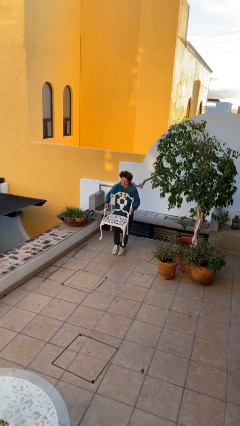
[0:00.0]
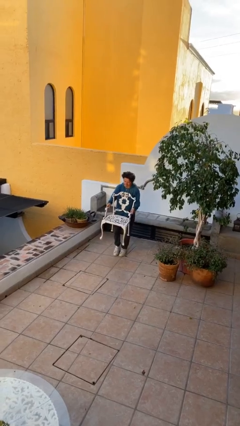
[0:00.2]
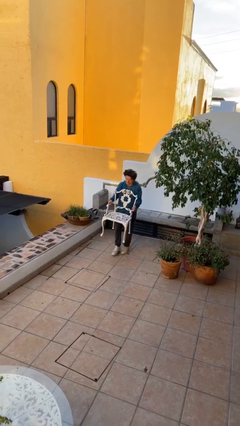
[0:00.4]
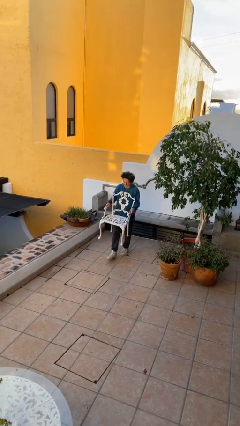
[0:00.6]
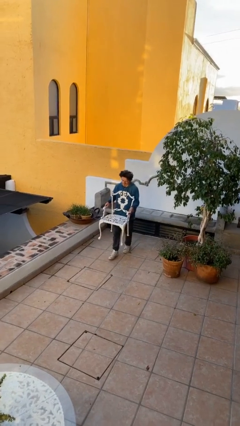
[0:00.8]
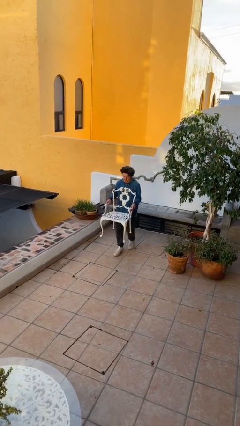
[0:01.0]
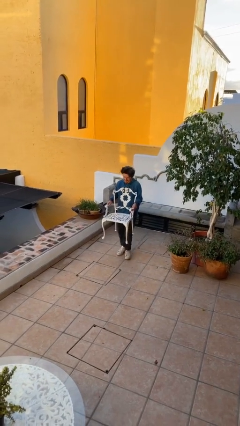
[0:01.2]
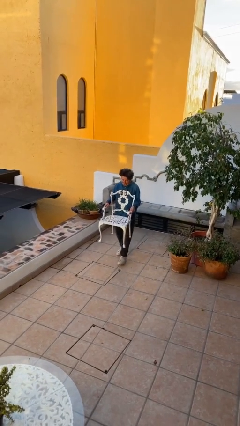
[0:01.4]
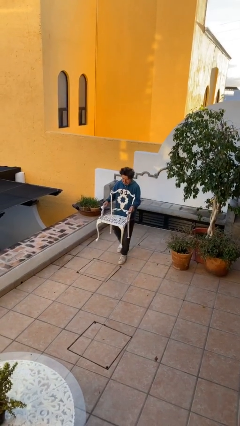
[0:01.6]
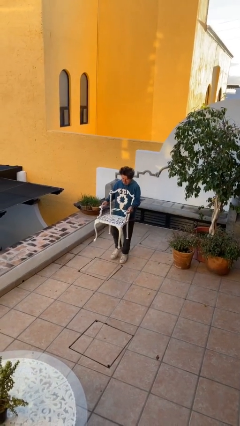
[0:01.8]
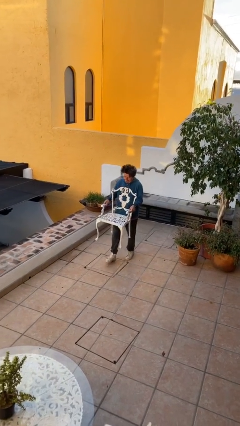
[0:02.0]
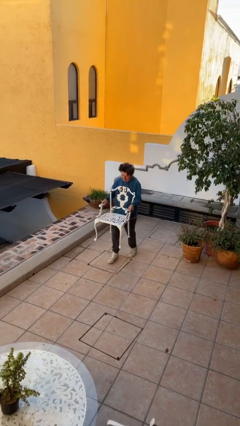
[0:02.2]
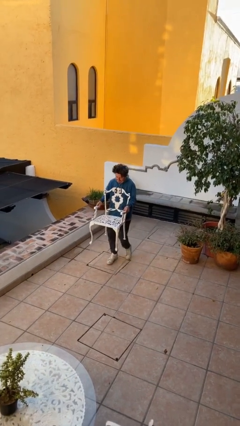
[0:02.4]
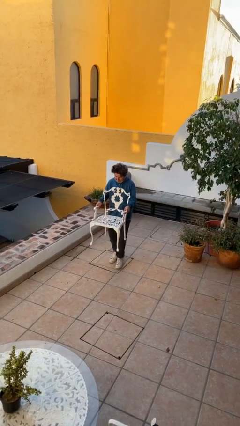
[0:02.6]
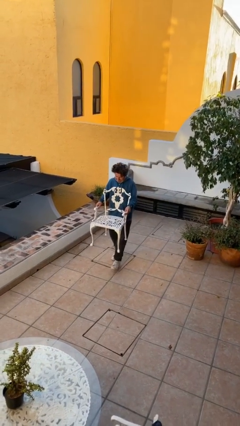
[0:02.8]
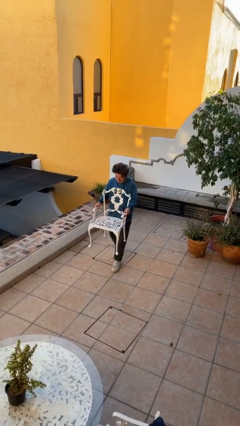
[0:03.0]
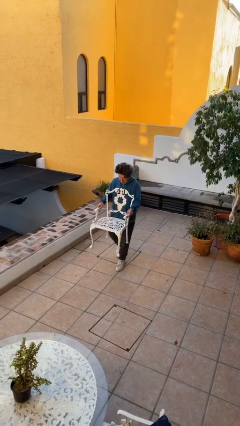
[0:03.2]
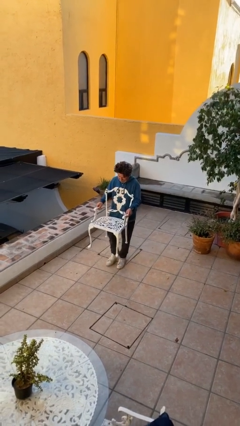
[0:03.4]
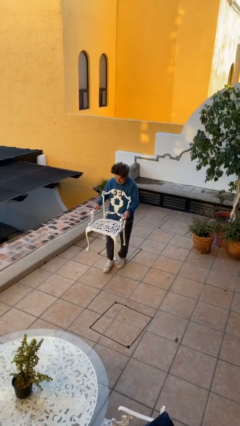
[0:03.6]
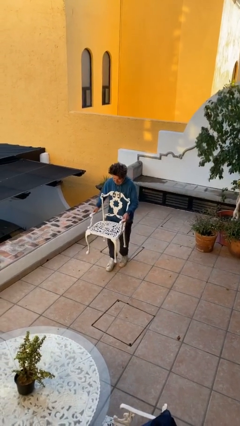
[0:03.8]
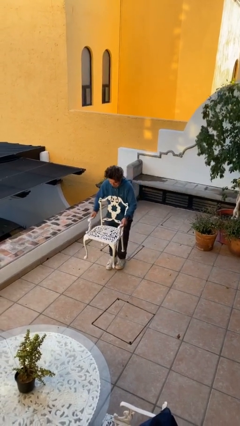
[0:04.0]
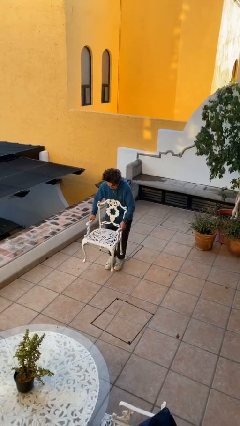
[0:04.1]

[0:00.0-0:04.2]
person carries heavy object

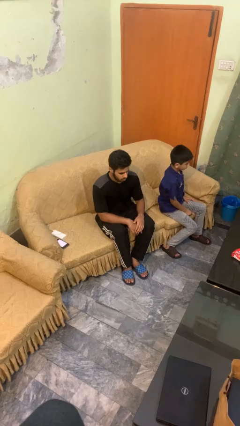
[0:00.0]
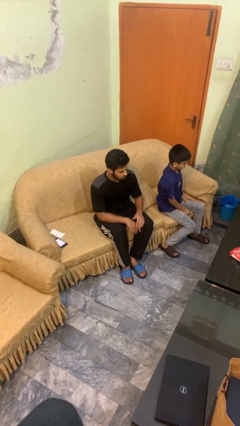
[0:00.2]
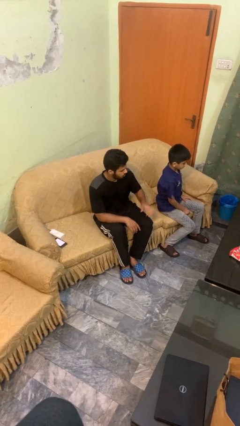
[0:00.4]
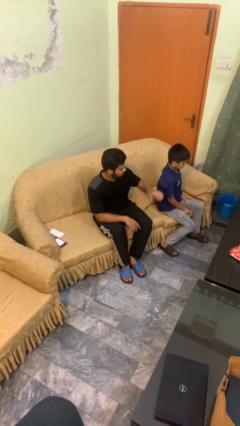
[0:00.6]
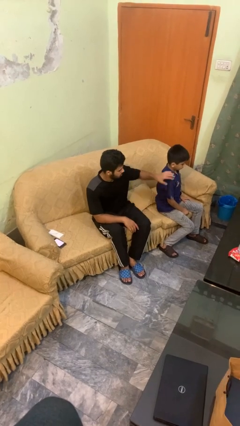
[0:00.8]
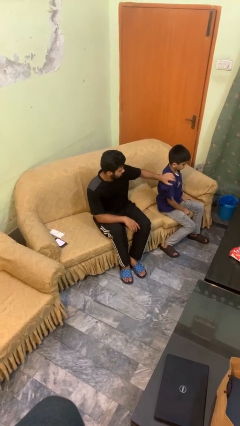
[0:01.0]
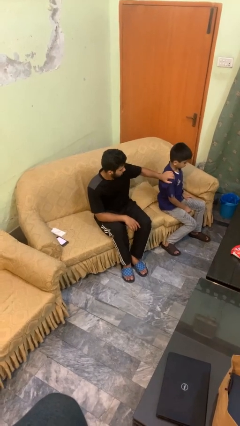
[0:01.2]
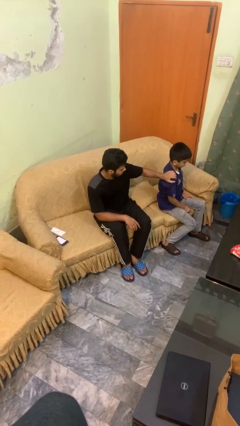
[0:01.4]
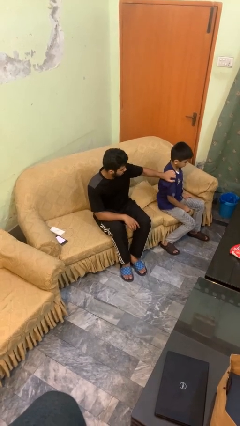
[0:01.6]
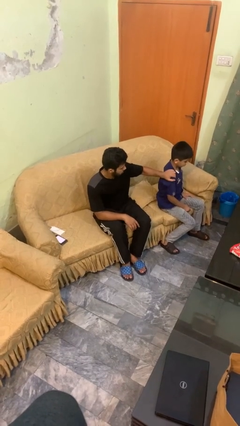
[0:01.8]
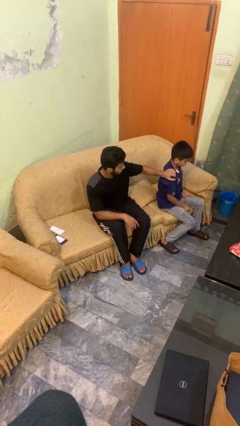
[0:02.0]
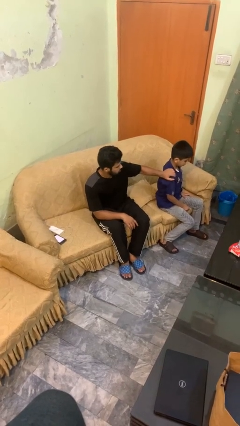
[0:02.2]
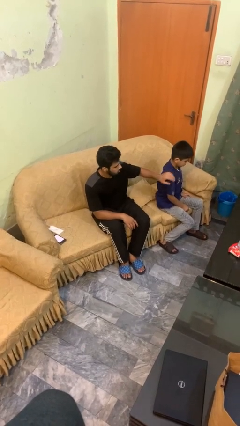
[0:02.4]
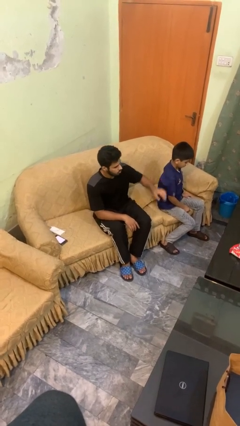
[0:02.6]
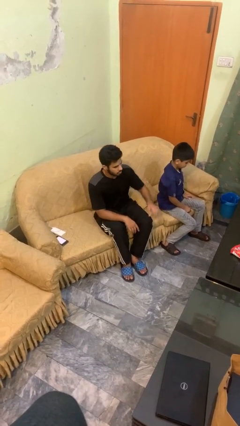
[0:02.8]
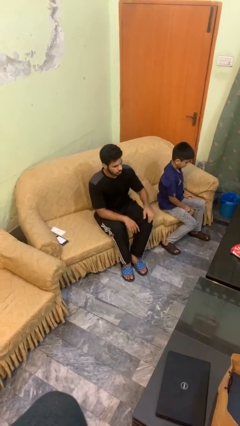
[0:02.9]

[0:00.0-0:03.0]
person pounds shoulders of person

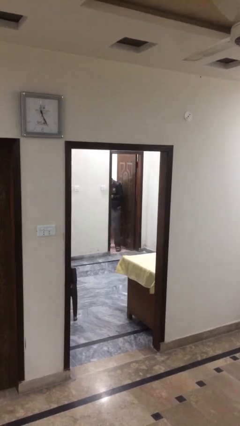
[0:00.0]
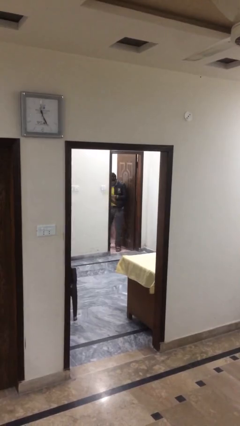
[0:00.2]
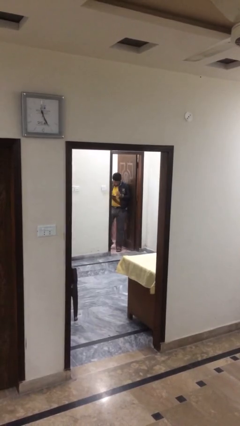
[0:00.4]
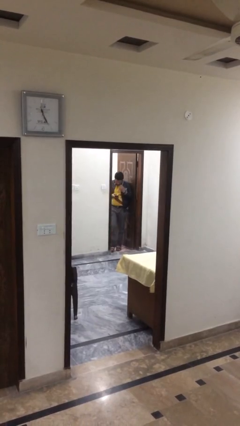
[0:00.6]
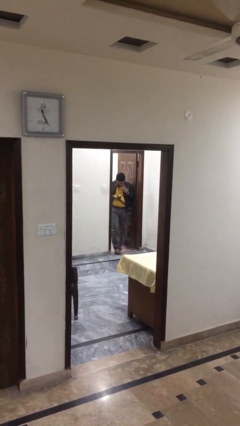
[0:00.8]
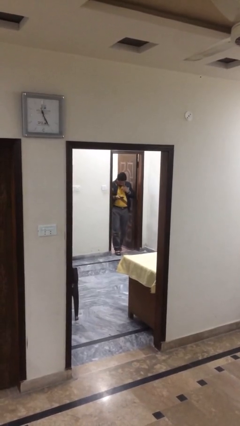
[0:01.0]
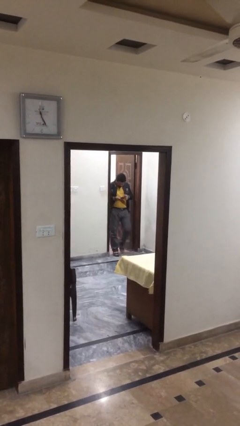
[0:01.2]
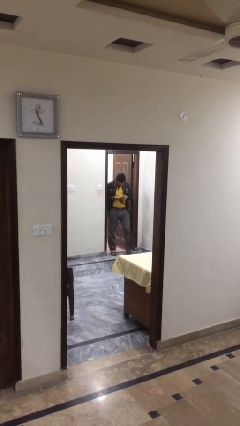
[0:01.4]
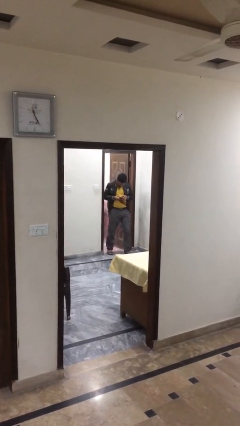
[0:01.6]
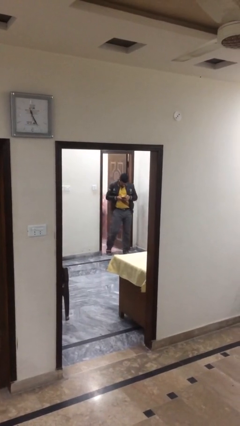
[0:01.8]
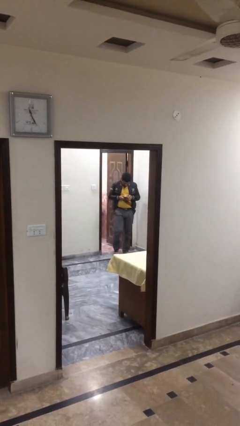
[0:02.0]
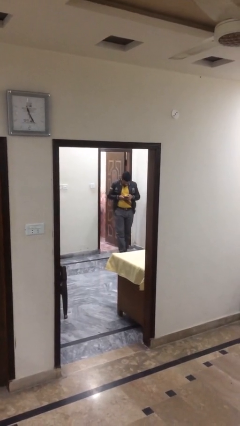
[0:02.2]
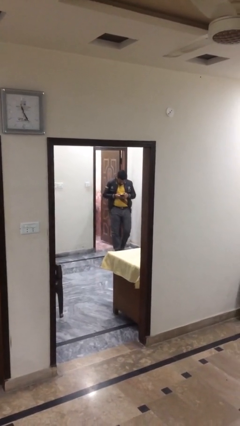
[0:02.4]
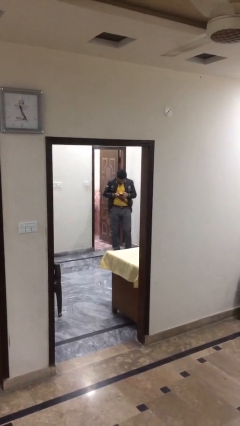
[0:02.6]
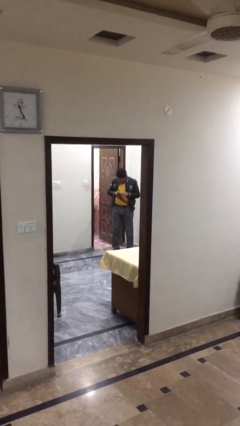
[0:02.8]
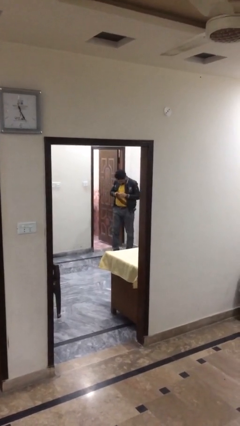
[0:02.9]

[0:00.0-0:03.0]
person exits scene through structure

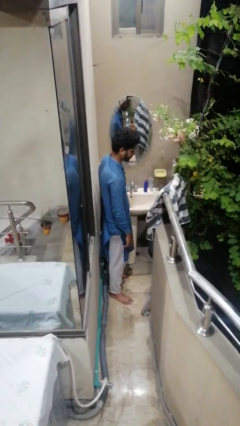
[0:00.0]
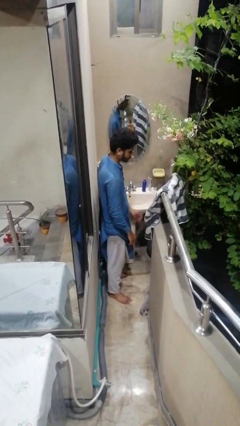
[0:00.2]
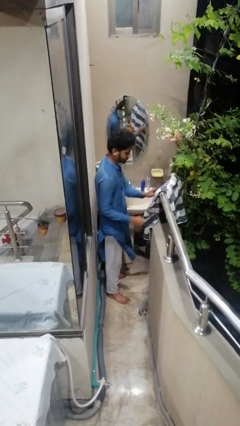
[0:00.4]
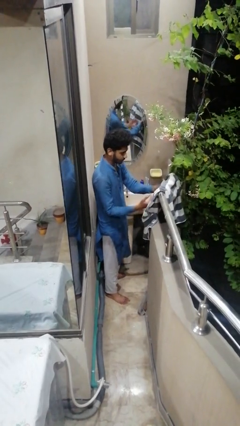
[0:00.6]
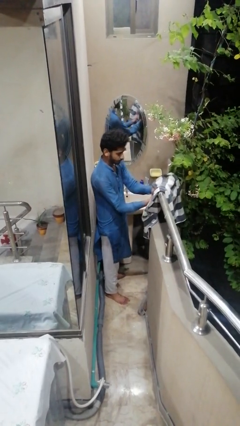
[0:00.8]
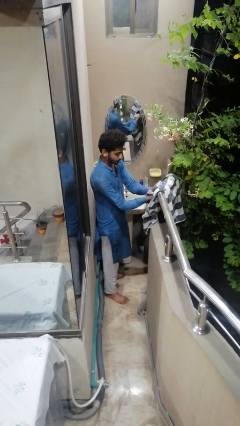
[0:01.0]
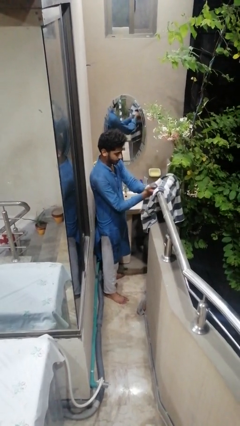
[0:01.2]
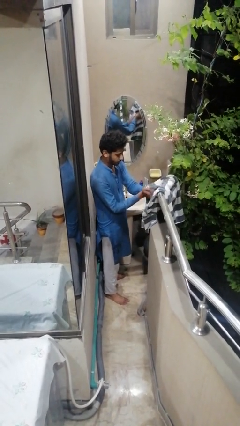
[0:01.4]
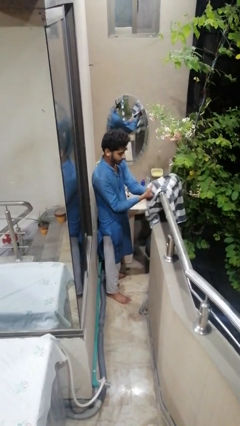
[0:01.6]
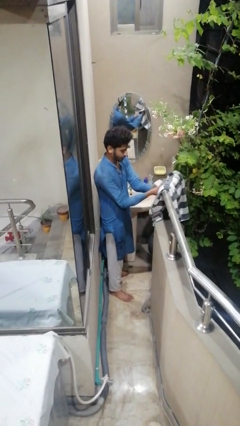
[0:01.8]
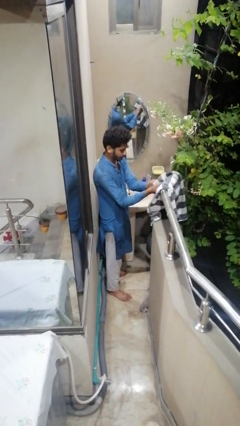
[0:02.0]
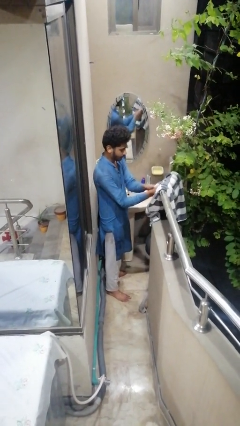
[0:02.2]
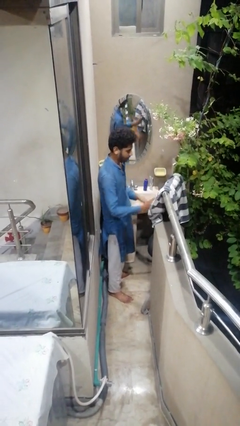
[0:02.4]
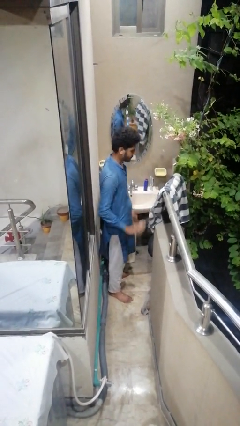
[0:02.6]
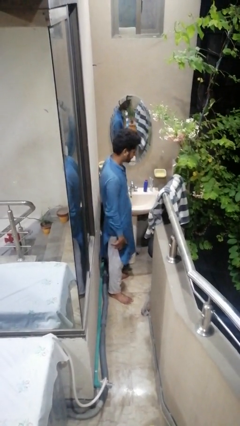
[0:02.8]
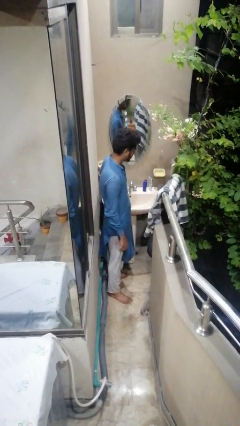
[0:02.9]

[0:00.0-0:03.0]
person dries hands with towel

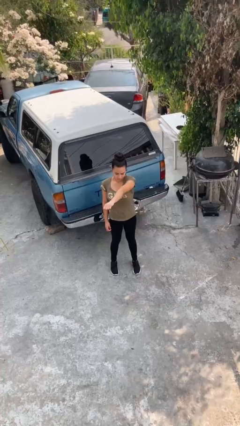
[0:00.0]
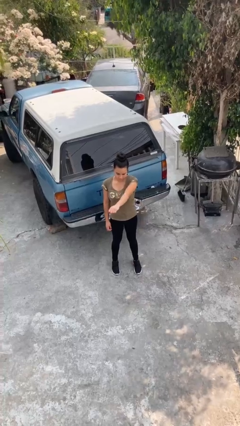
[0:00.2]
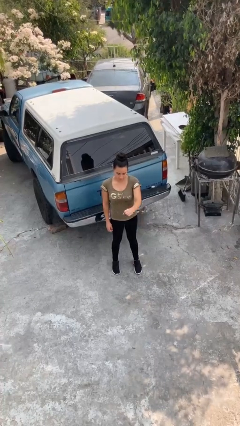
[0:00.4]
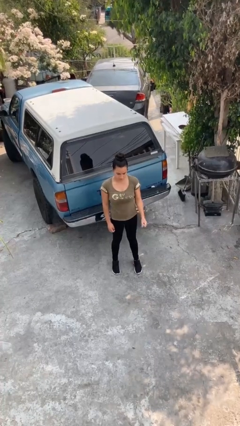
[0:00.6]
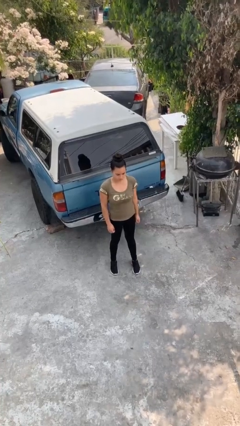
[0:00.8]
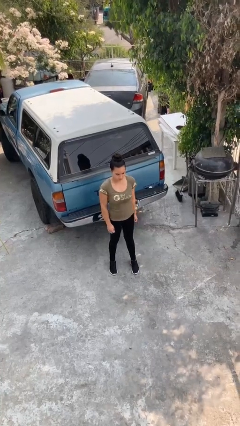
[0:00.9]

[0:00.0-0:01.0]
person karate chop

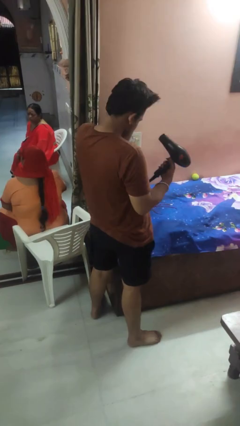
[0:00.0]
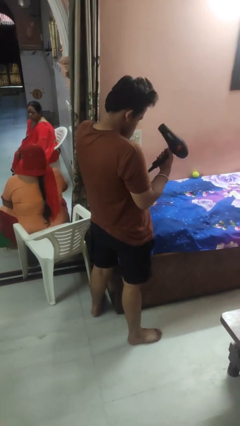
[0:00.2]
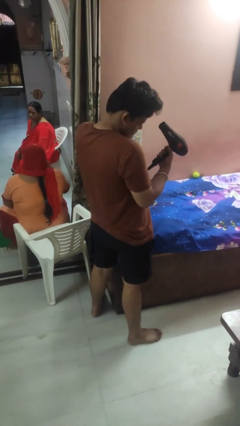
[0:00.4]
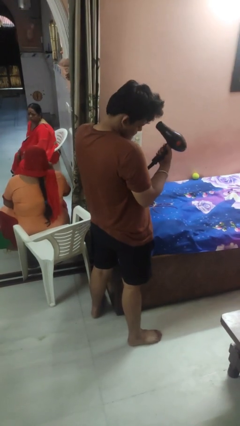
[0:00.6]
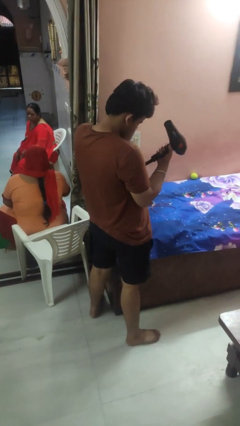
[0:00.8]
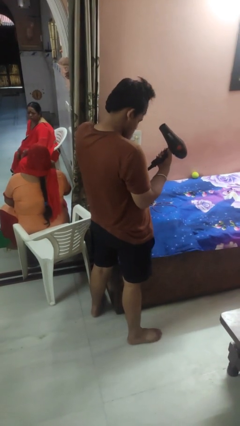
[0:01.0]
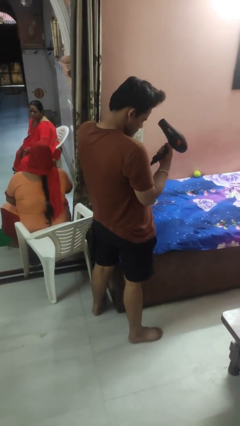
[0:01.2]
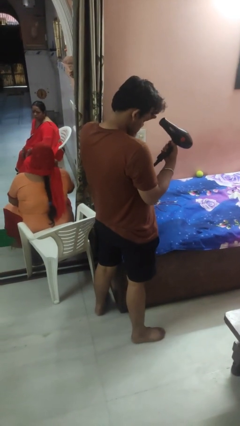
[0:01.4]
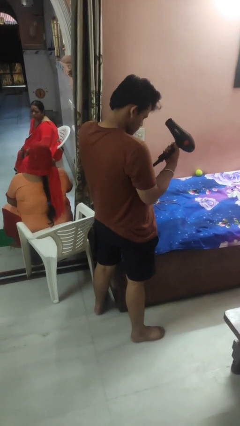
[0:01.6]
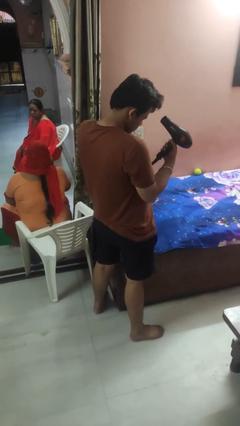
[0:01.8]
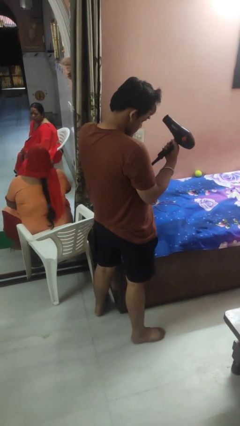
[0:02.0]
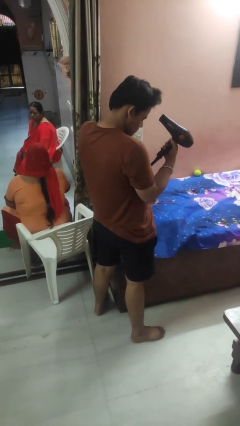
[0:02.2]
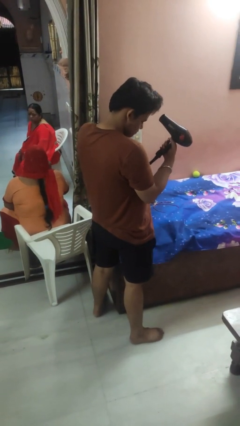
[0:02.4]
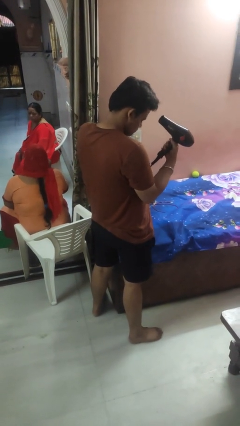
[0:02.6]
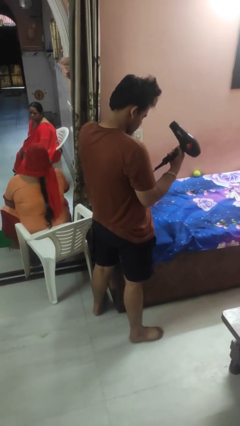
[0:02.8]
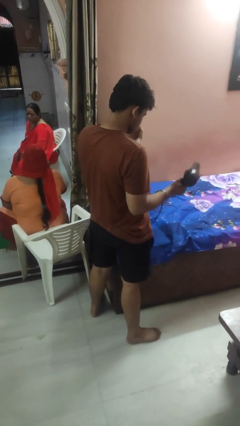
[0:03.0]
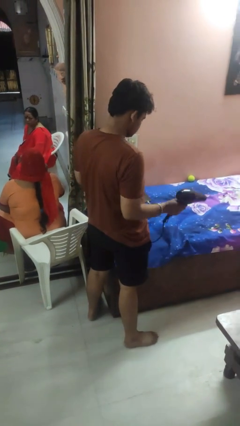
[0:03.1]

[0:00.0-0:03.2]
person dries hair with hairdryer
